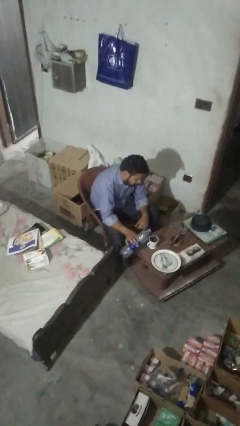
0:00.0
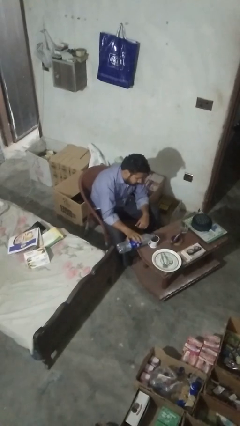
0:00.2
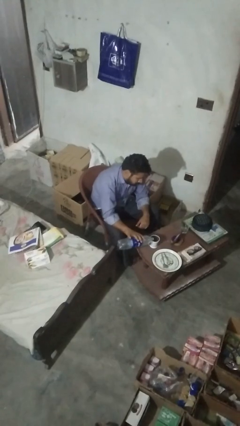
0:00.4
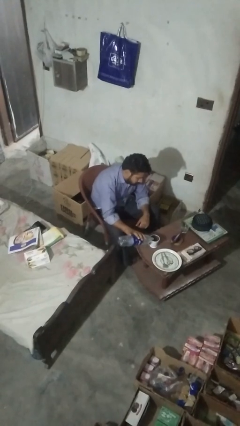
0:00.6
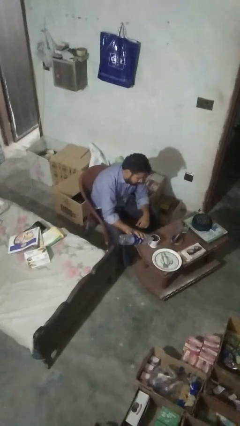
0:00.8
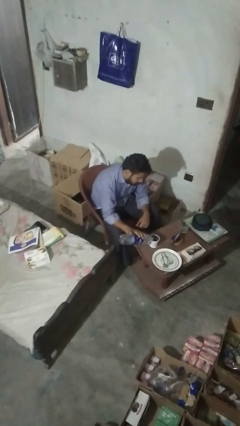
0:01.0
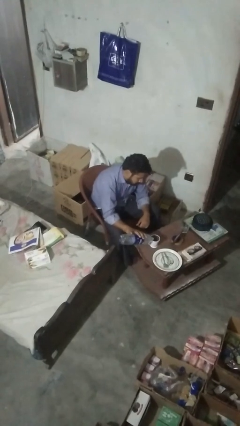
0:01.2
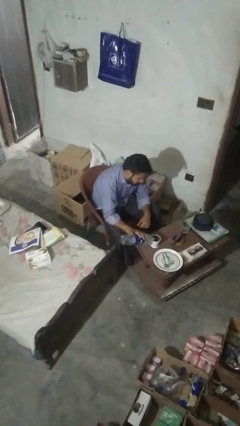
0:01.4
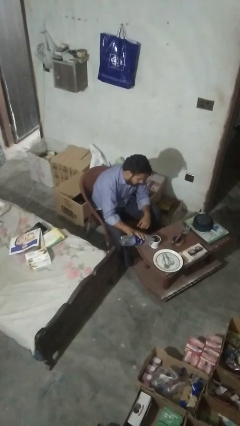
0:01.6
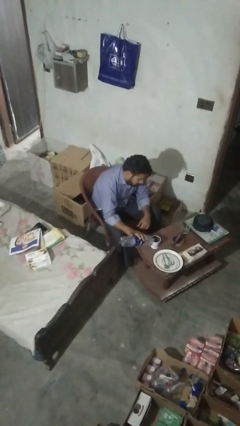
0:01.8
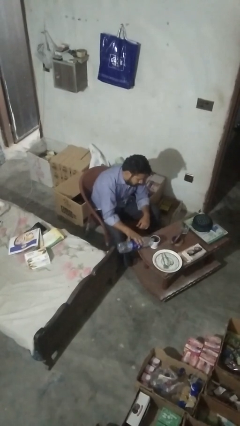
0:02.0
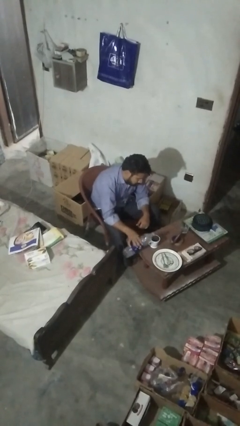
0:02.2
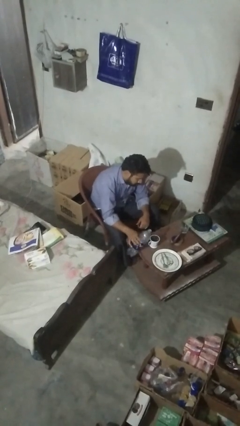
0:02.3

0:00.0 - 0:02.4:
person pours liquid into cup

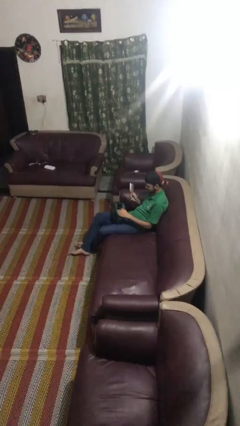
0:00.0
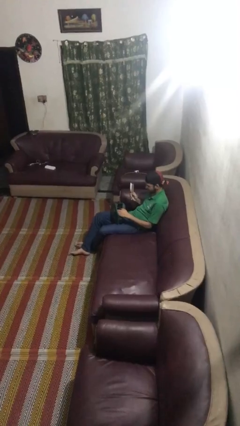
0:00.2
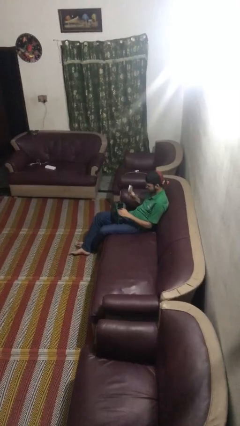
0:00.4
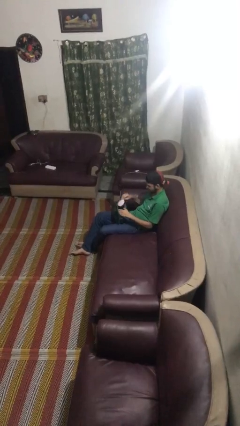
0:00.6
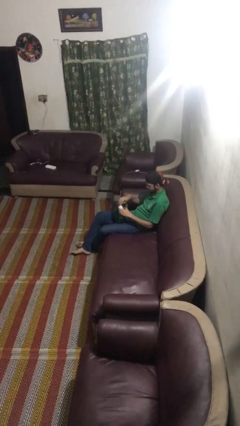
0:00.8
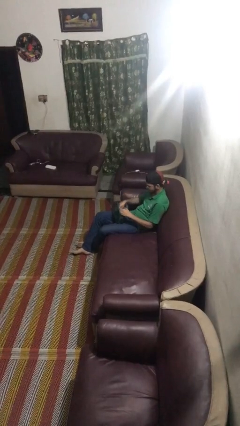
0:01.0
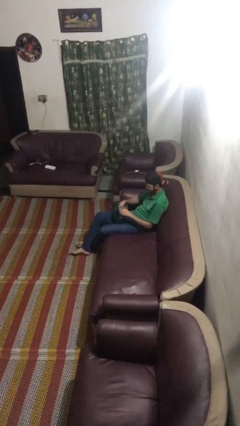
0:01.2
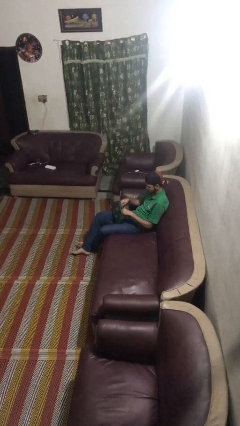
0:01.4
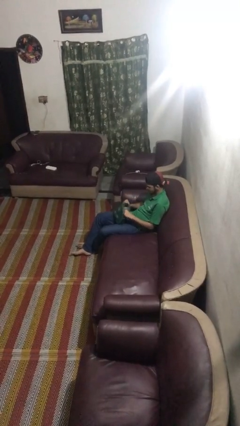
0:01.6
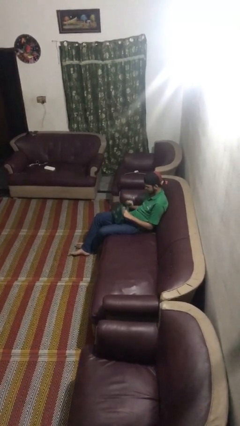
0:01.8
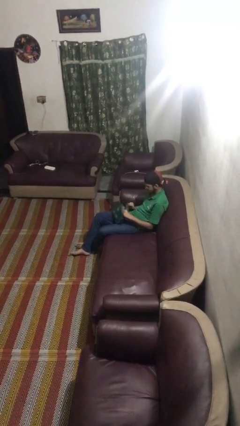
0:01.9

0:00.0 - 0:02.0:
person puts object into purse

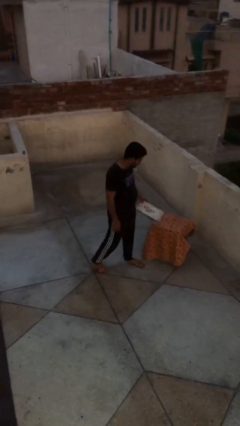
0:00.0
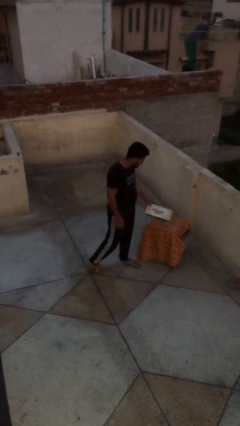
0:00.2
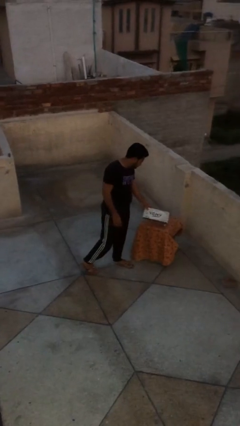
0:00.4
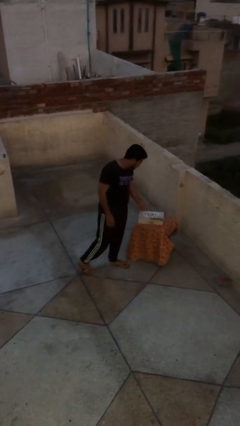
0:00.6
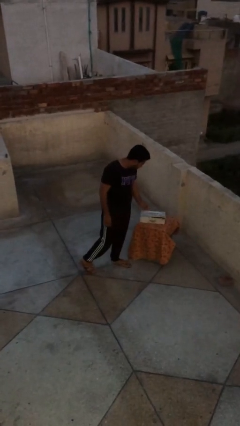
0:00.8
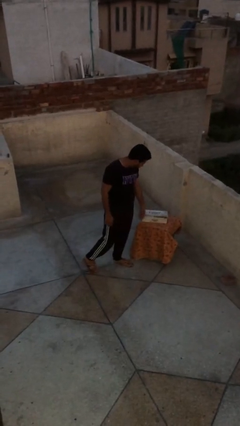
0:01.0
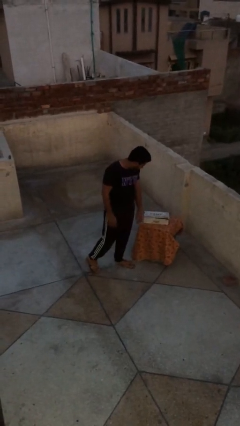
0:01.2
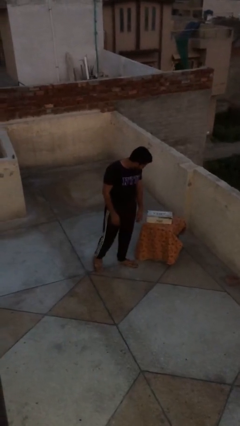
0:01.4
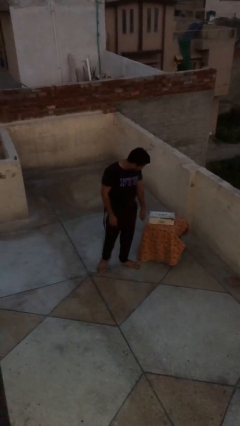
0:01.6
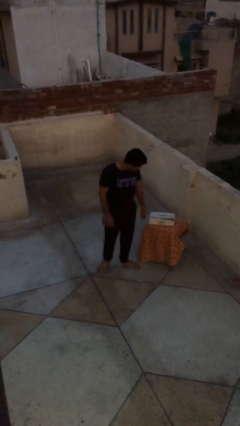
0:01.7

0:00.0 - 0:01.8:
person puts down object on table

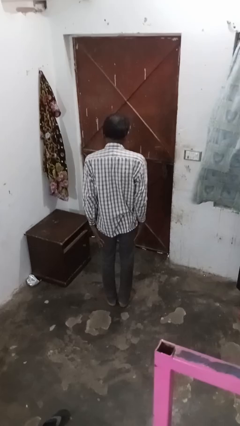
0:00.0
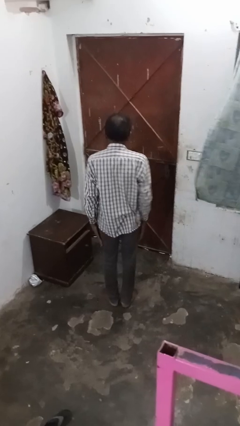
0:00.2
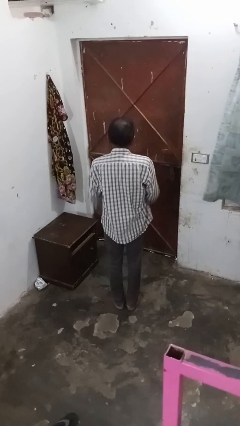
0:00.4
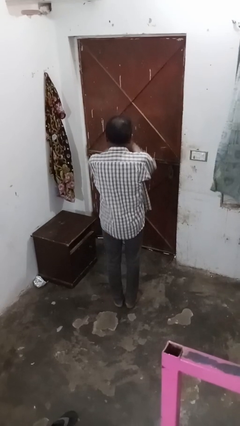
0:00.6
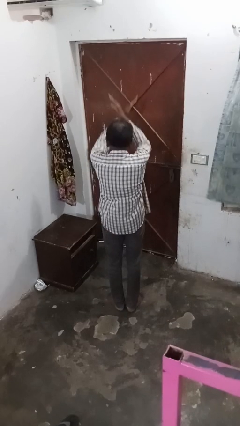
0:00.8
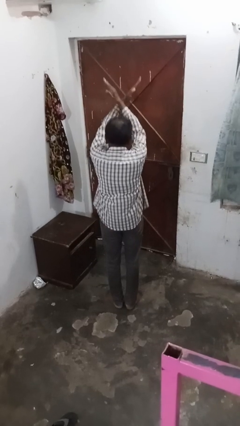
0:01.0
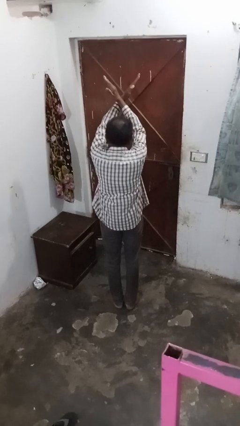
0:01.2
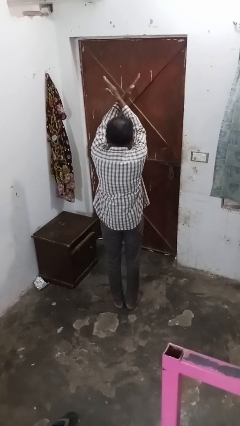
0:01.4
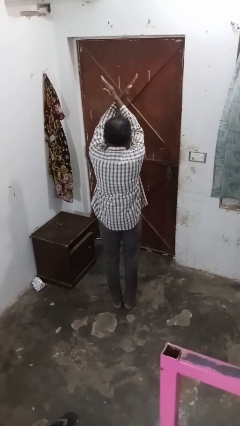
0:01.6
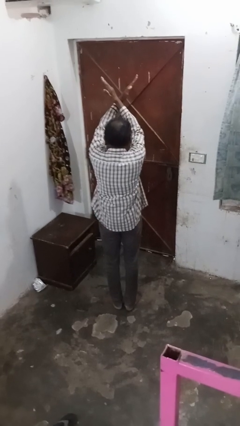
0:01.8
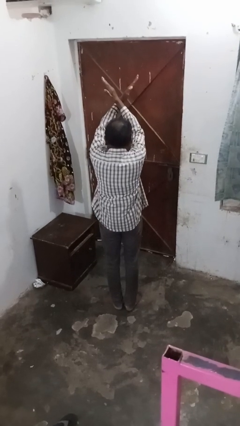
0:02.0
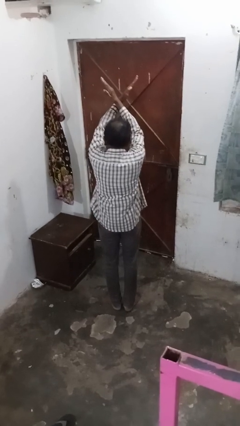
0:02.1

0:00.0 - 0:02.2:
person gestures arms x

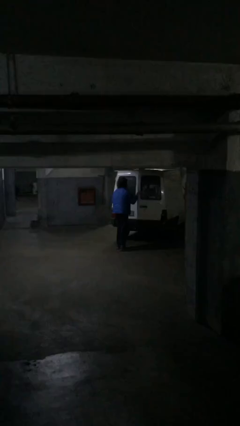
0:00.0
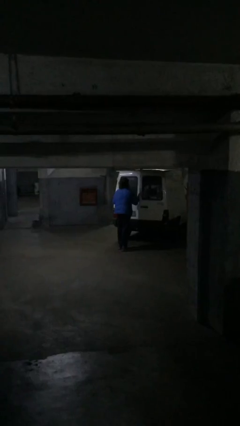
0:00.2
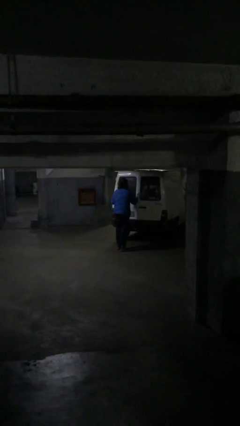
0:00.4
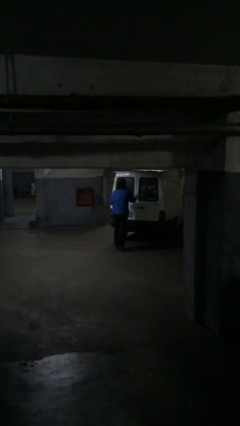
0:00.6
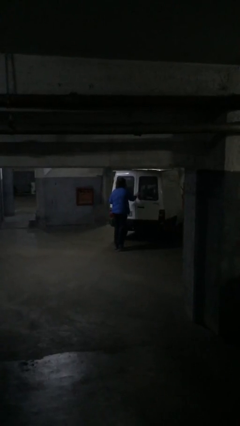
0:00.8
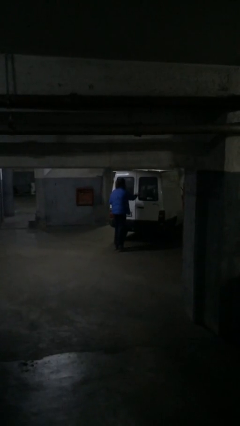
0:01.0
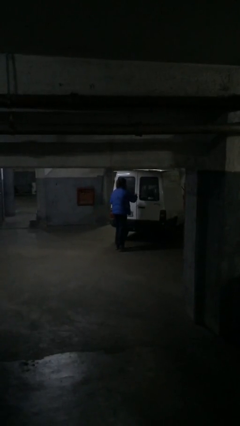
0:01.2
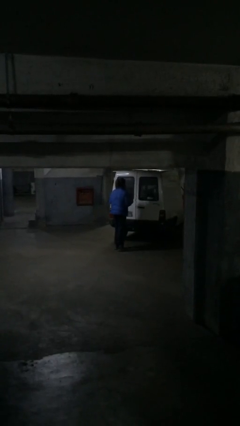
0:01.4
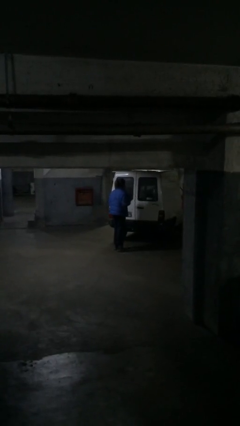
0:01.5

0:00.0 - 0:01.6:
person closes car door

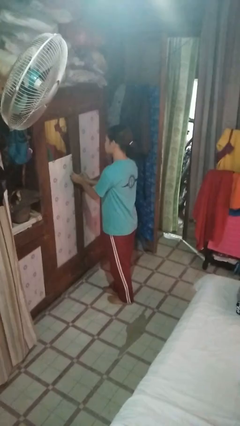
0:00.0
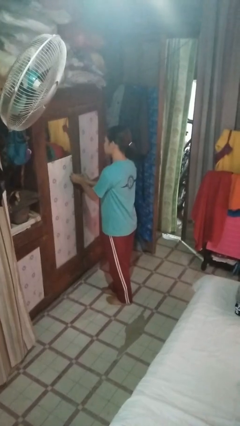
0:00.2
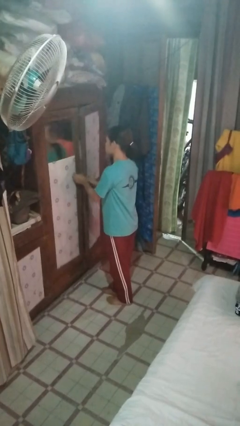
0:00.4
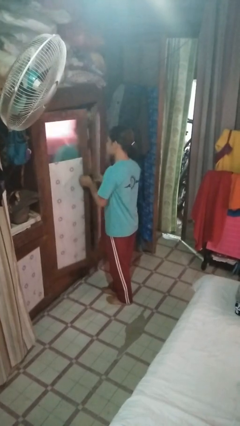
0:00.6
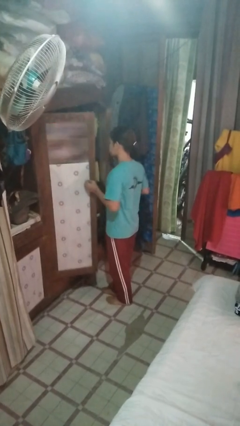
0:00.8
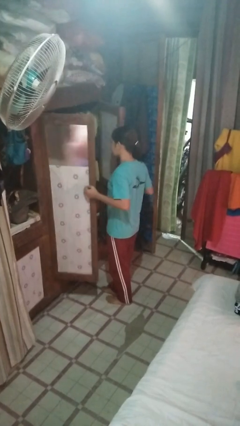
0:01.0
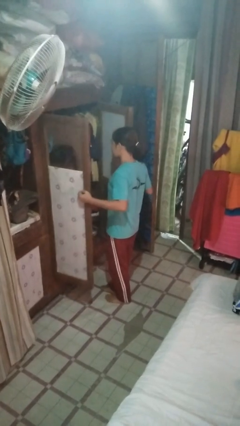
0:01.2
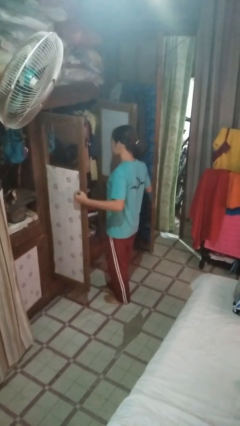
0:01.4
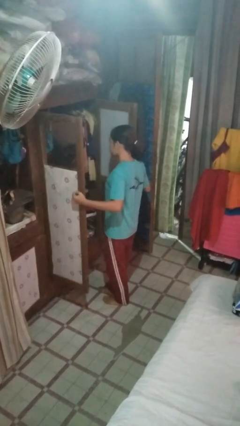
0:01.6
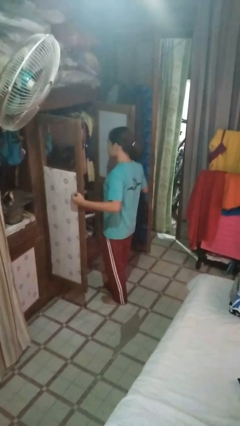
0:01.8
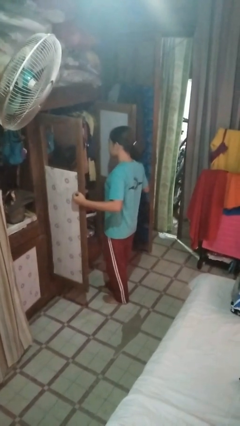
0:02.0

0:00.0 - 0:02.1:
person opens closet door

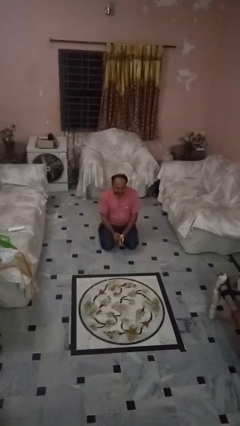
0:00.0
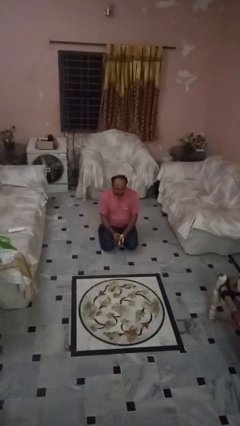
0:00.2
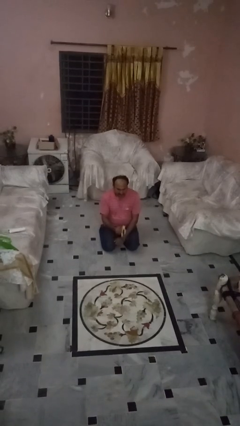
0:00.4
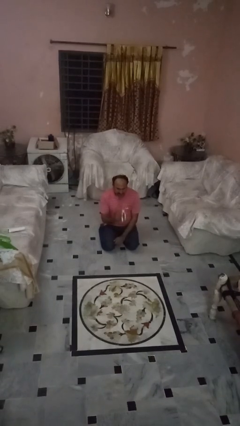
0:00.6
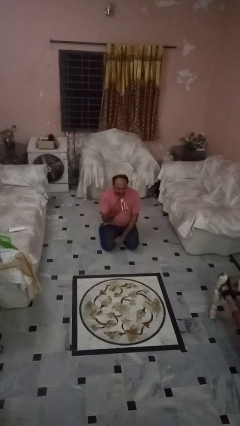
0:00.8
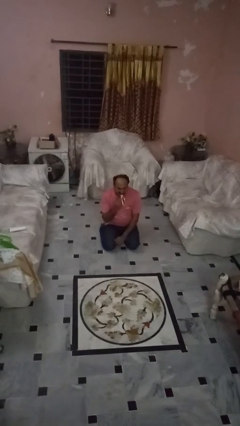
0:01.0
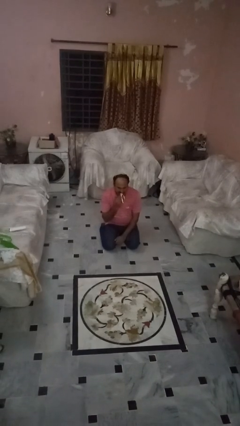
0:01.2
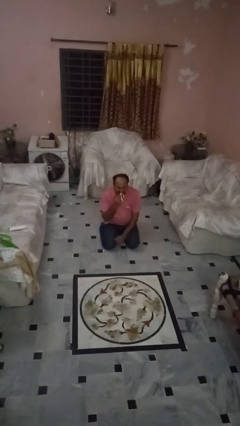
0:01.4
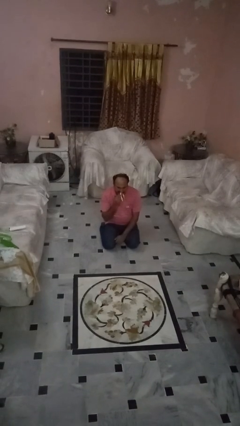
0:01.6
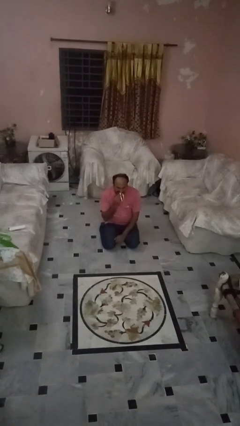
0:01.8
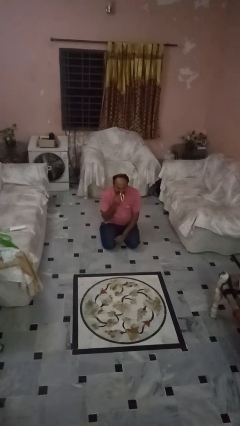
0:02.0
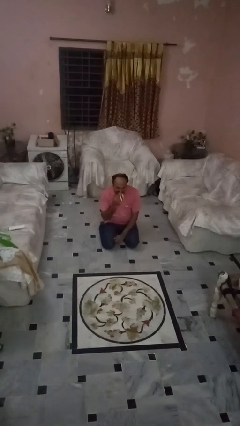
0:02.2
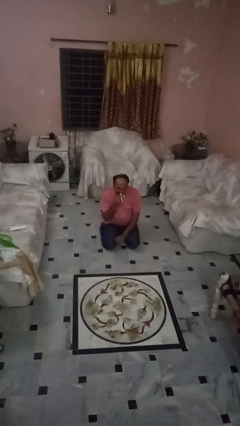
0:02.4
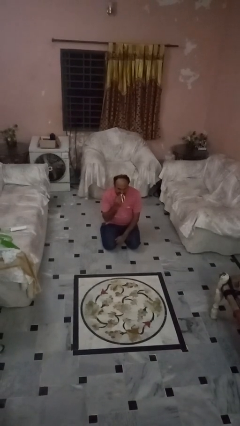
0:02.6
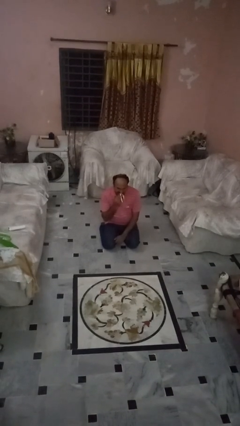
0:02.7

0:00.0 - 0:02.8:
person eats banana

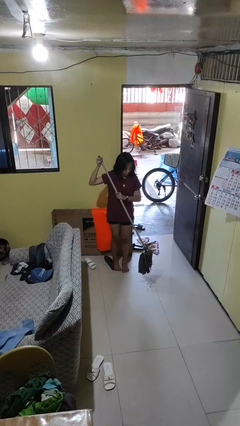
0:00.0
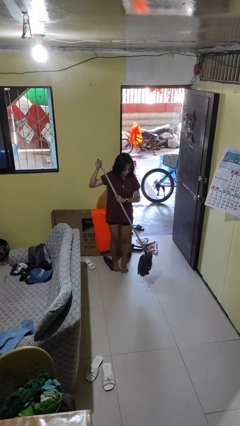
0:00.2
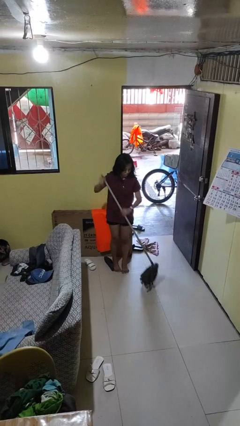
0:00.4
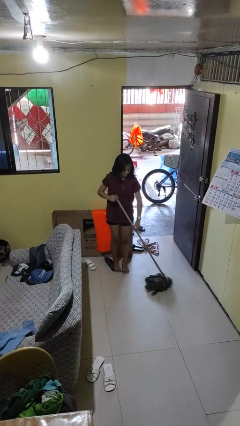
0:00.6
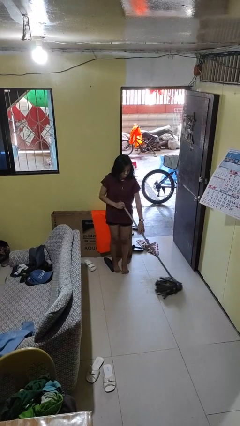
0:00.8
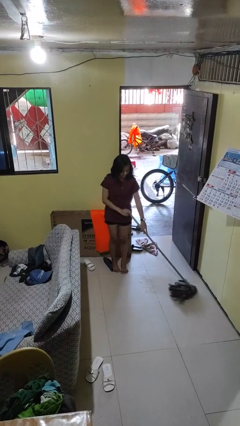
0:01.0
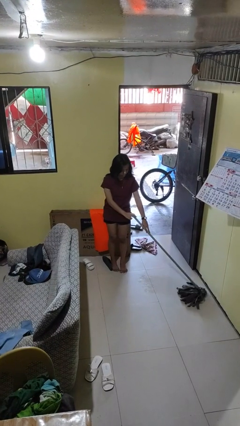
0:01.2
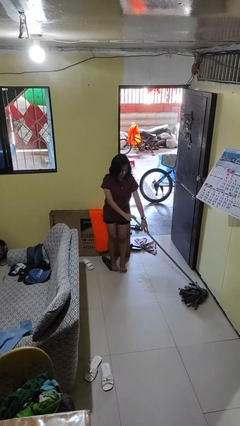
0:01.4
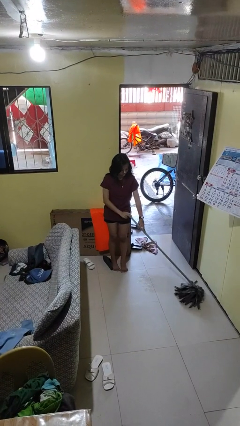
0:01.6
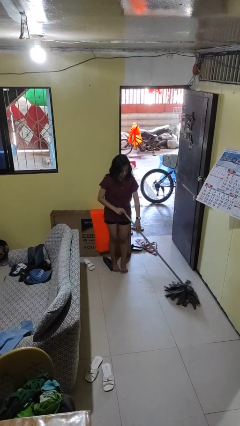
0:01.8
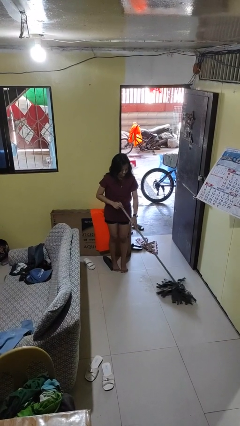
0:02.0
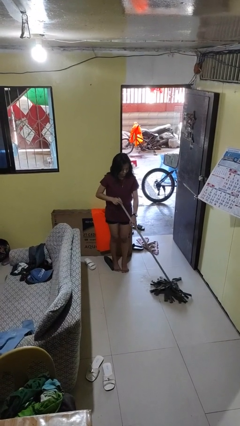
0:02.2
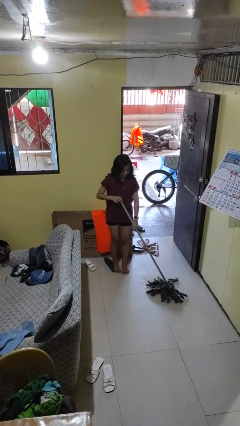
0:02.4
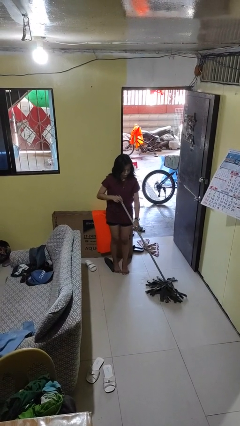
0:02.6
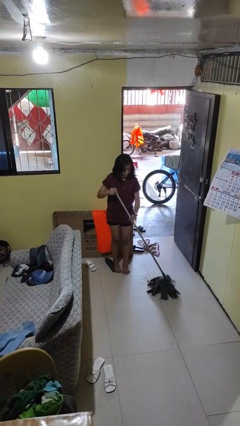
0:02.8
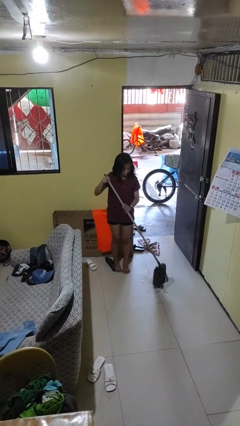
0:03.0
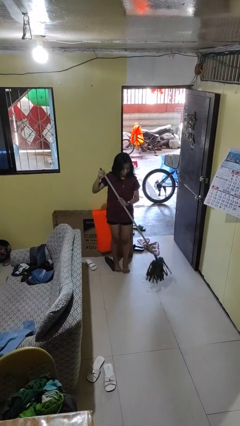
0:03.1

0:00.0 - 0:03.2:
person mops
